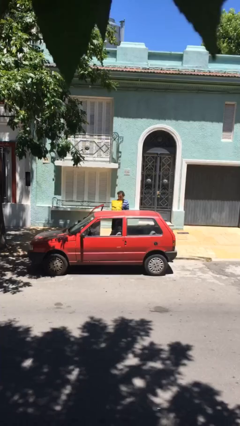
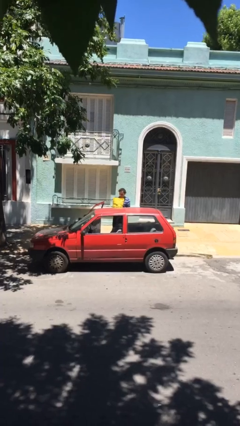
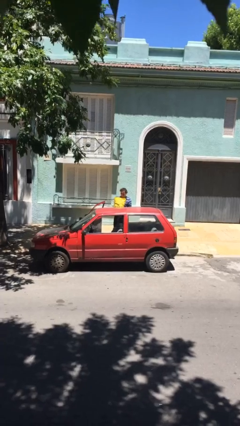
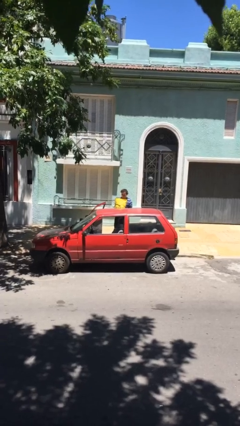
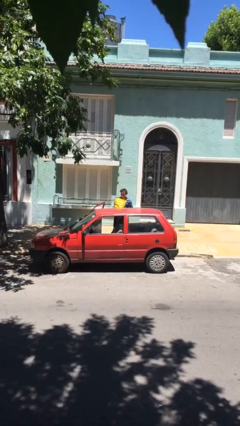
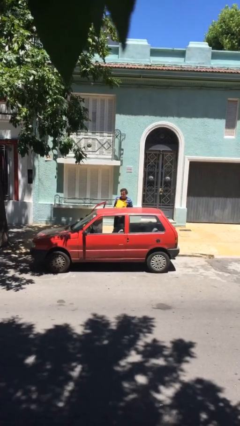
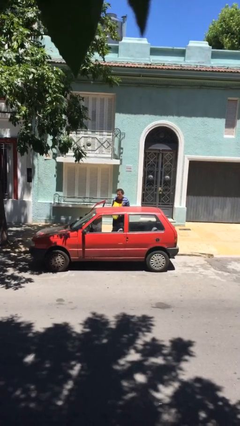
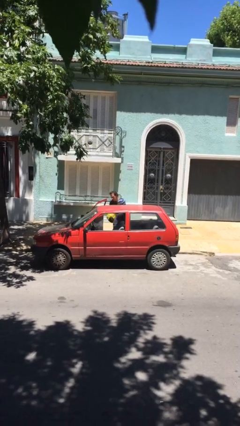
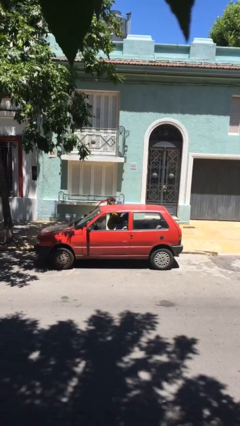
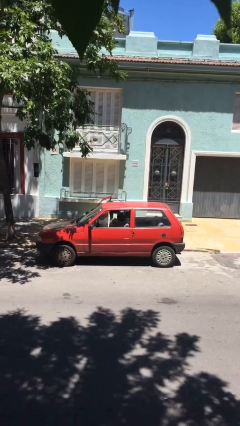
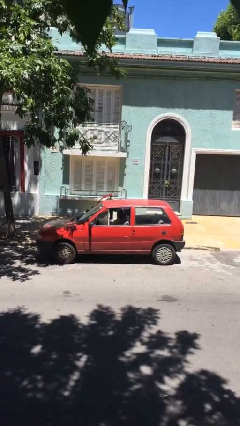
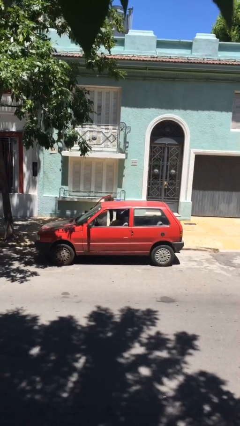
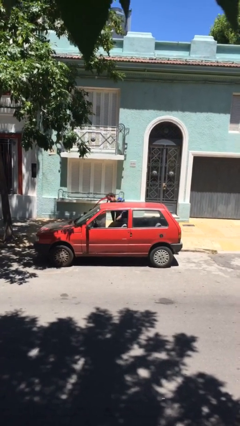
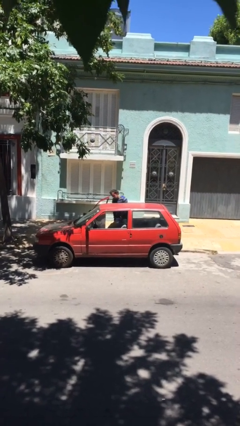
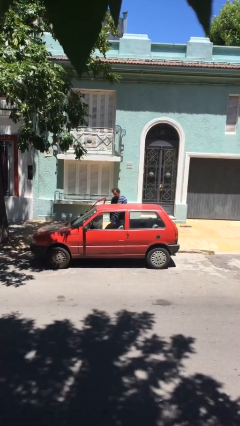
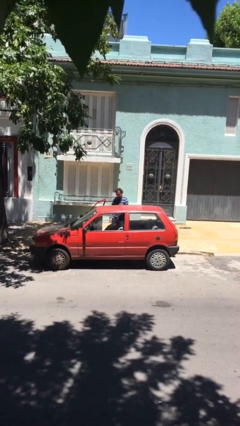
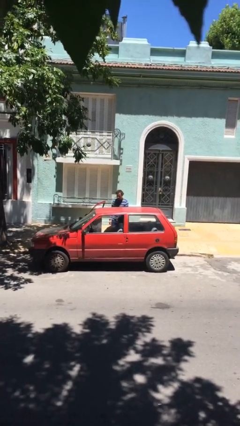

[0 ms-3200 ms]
person loads car

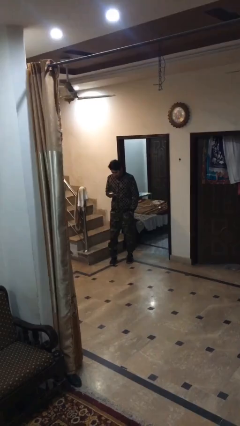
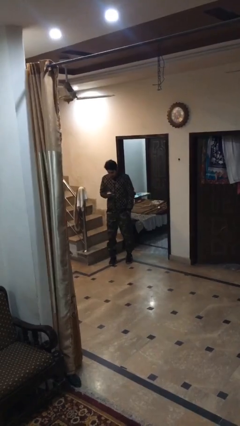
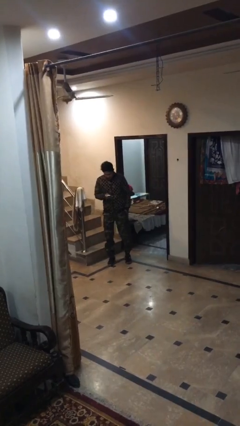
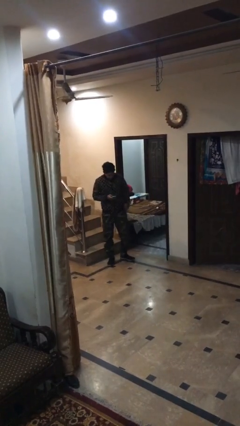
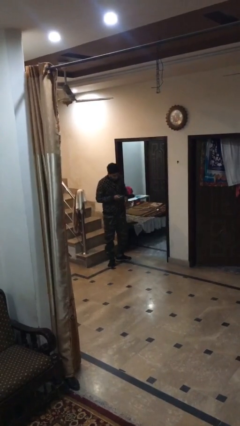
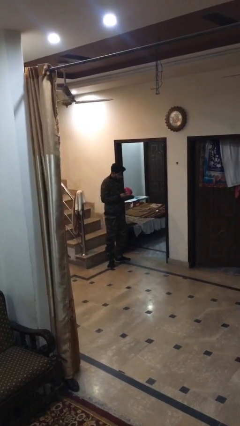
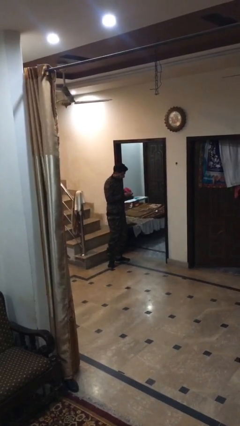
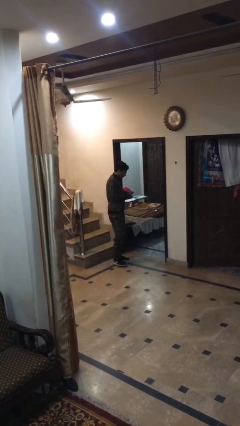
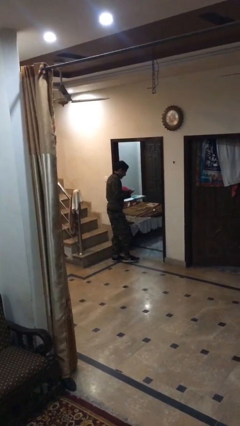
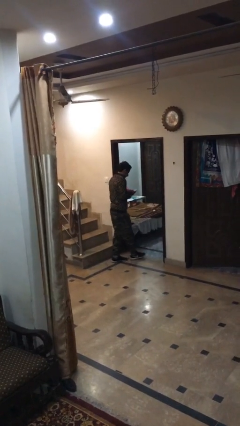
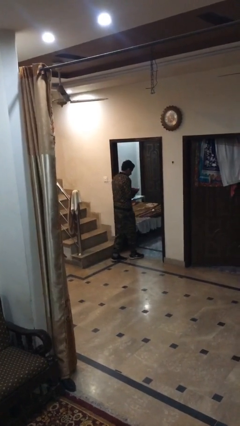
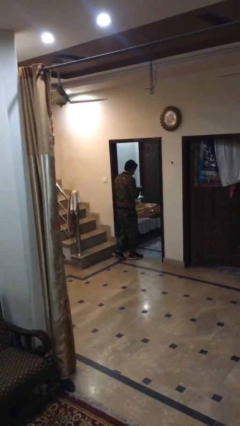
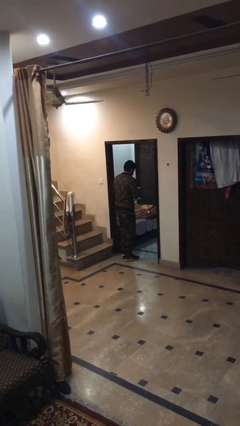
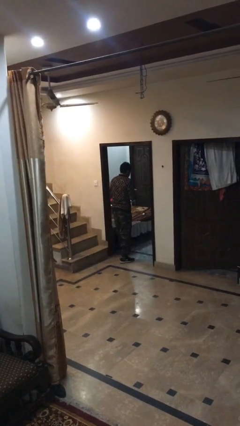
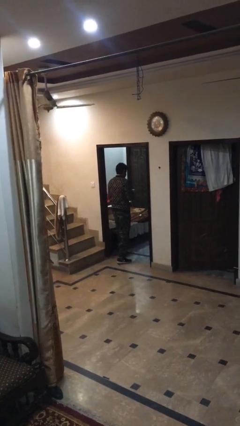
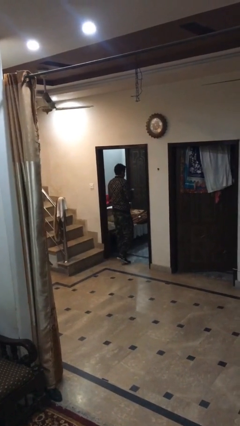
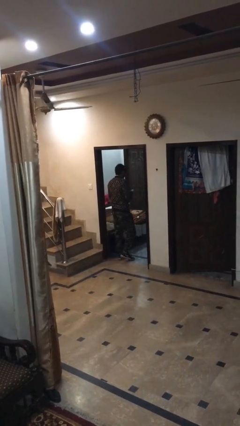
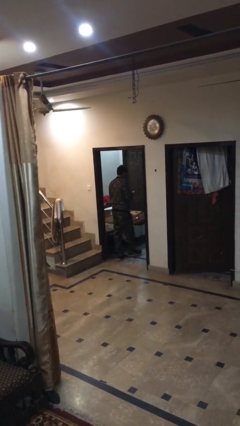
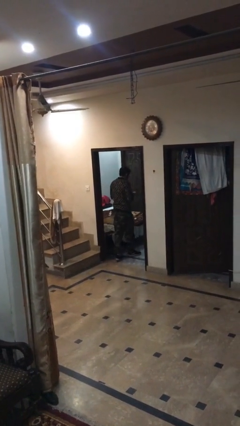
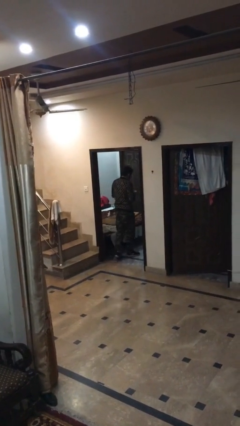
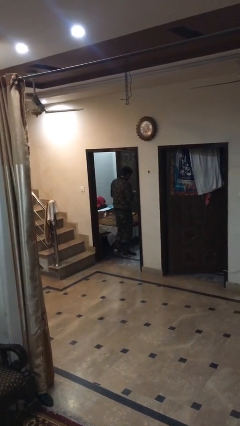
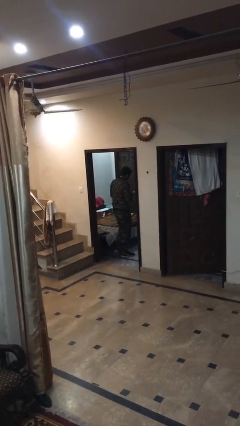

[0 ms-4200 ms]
person enters scene through structure

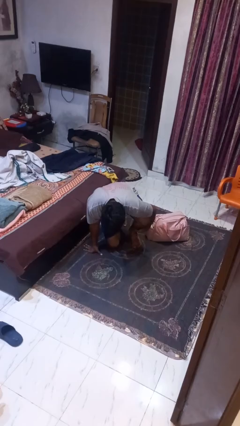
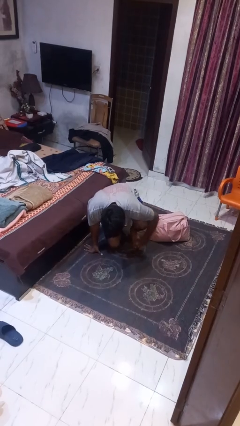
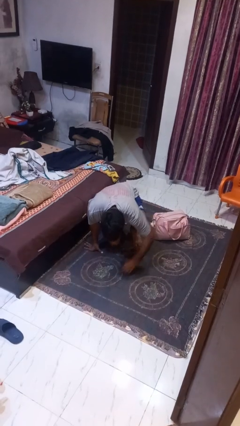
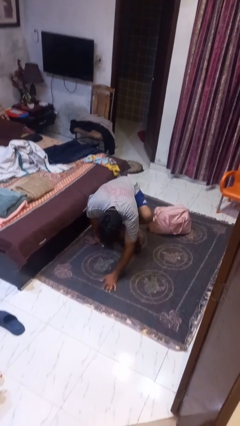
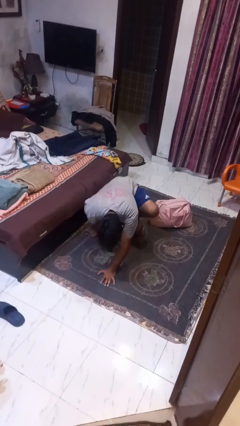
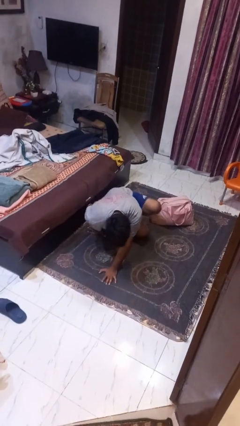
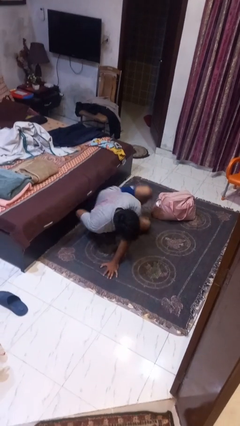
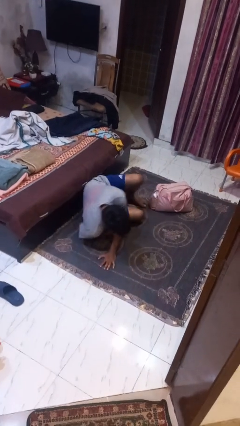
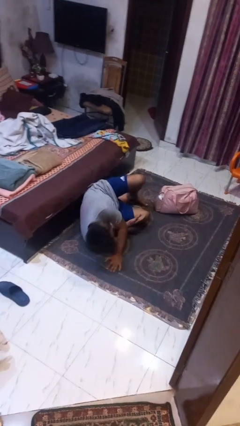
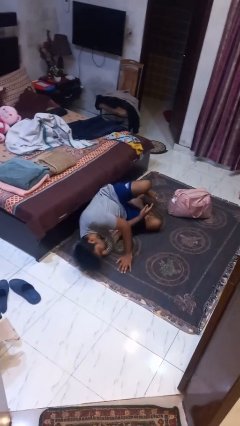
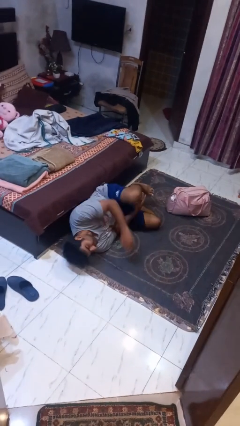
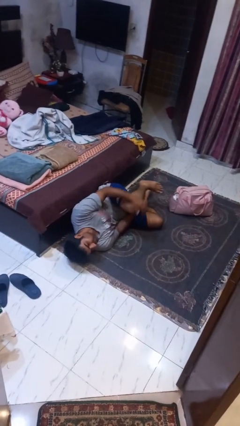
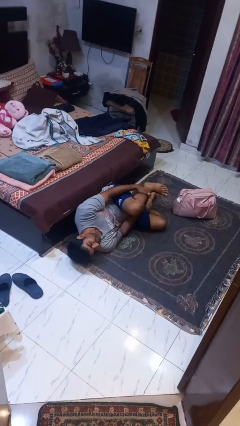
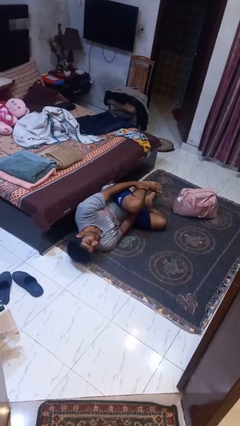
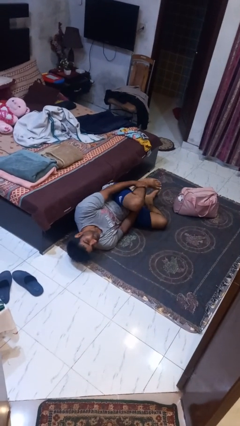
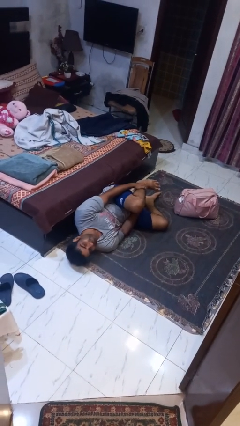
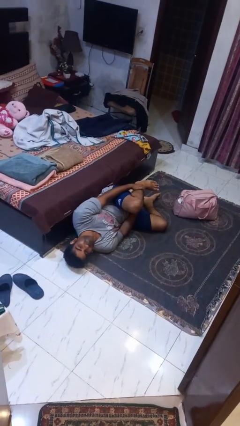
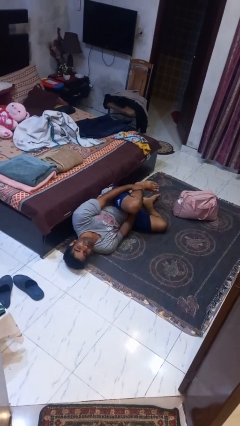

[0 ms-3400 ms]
person lies down on floor

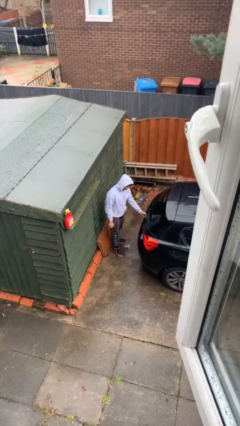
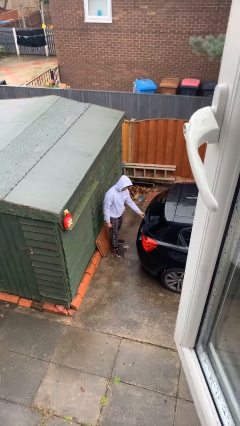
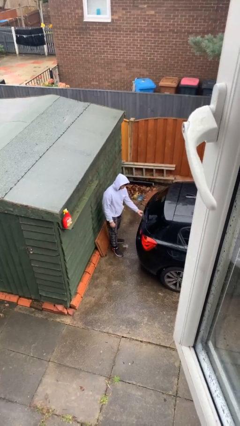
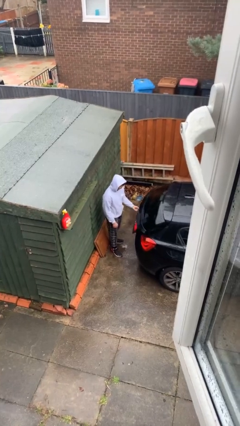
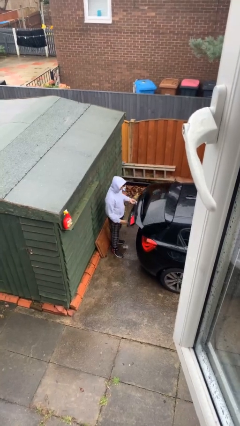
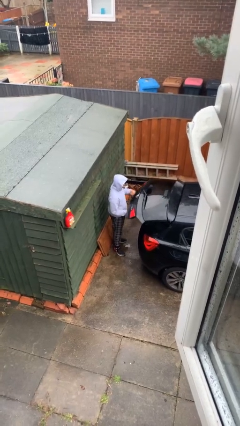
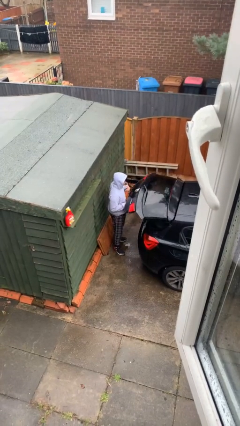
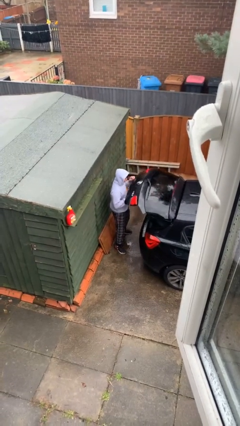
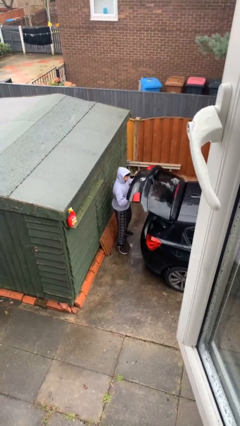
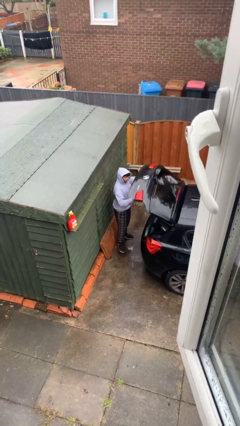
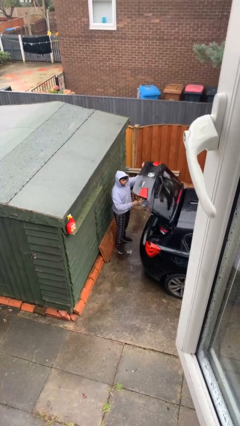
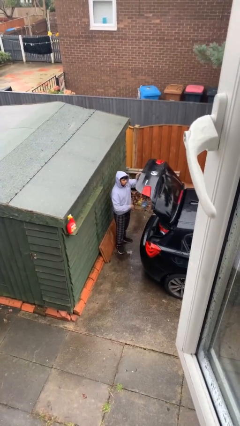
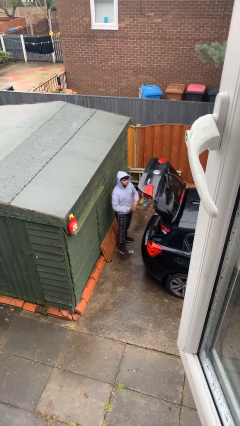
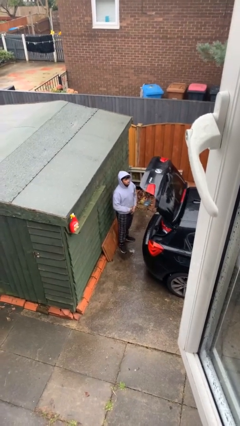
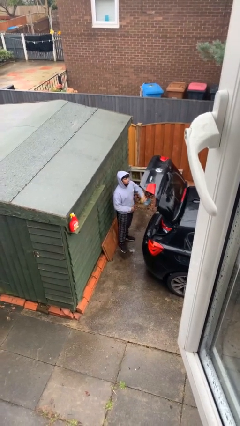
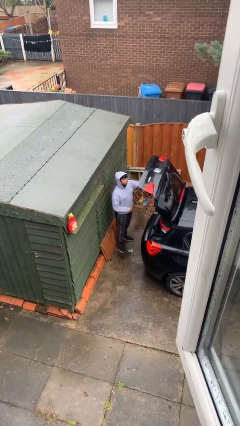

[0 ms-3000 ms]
person opens car trunk

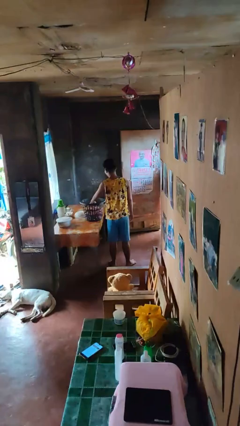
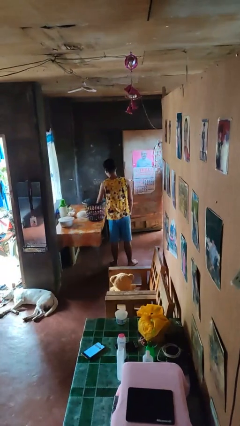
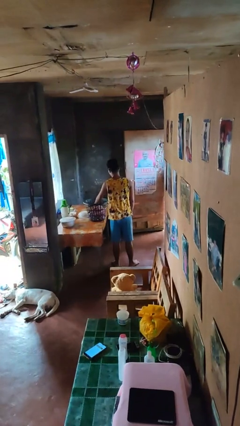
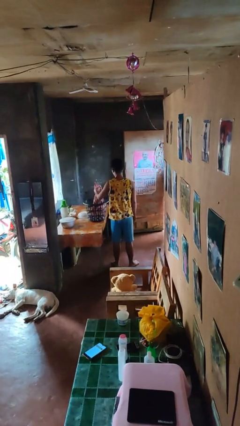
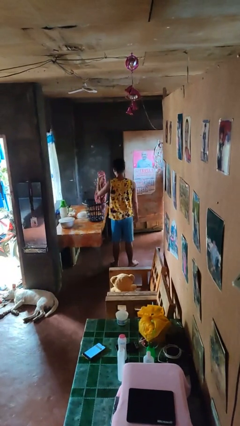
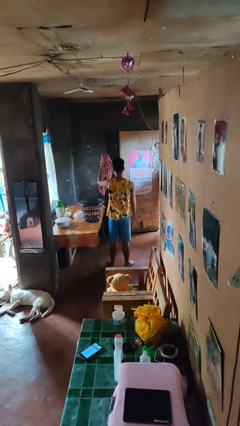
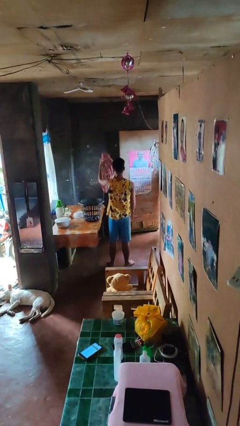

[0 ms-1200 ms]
person takes object from basket

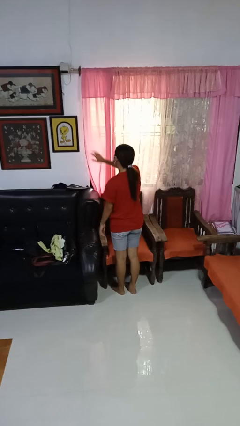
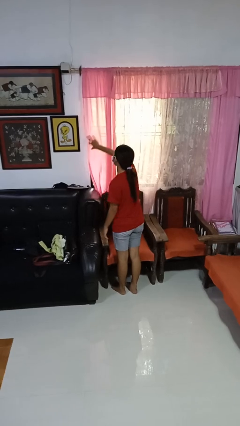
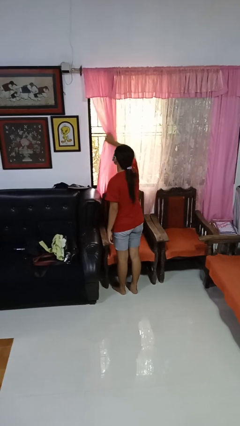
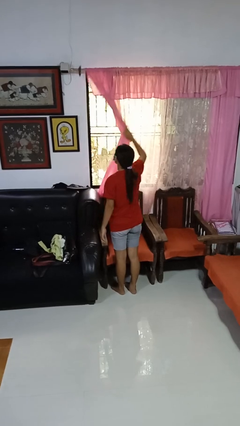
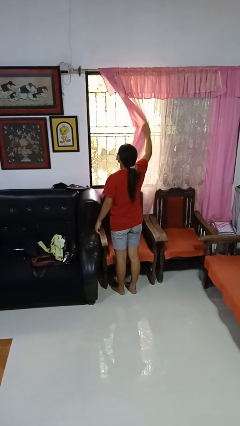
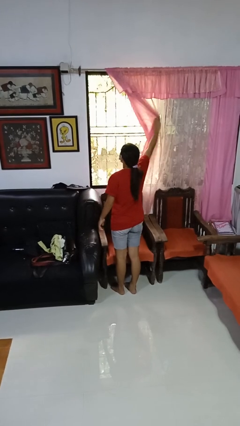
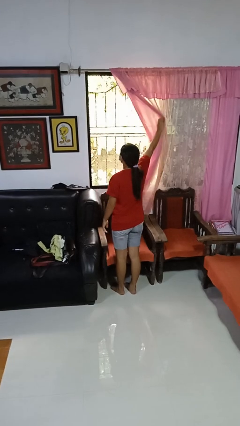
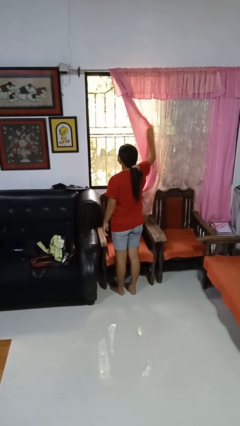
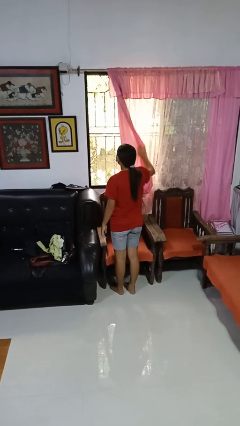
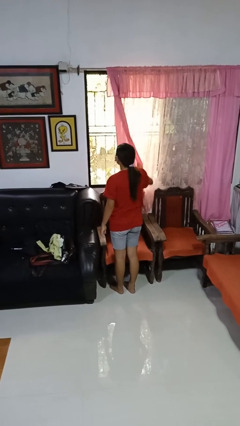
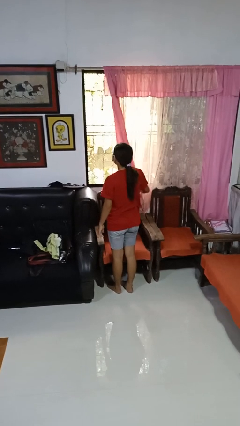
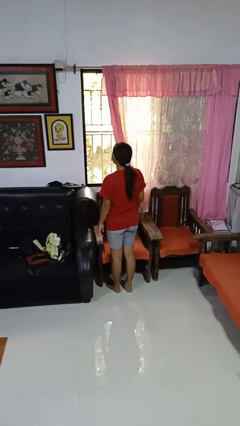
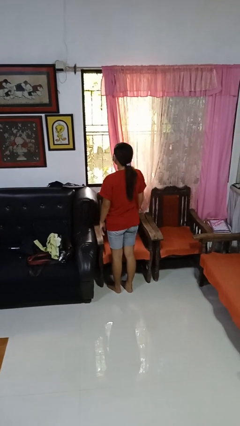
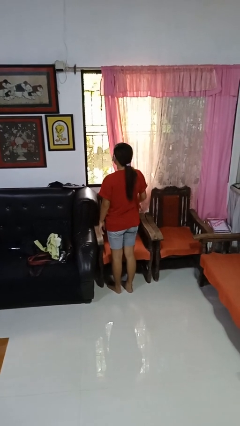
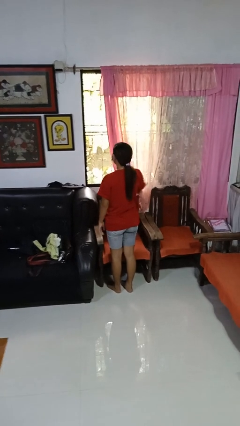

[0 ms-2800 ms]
person opens curtains
